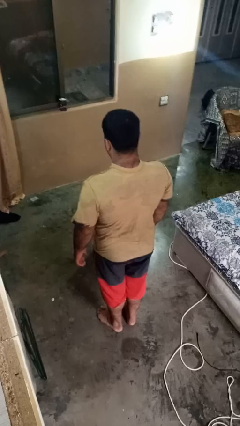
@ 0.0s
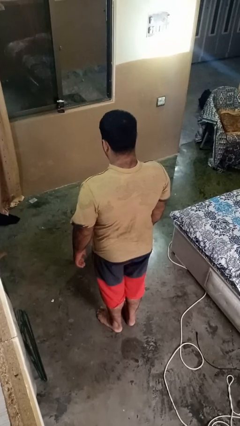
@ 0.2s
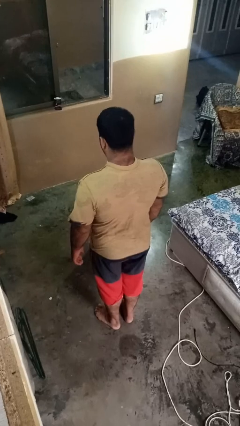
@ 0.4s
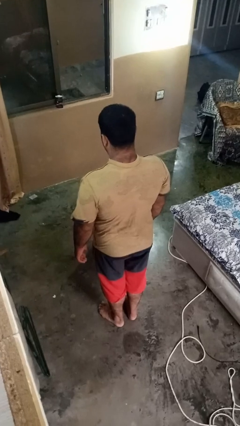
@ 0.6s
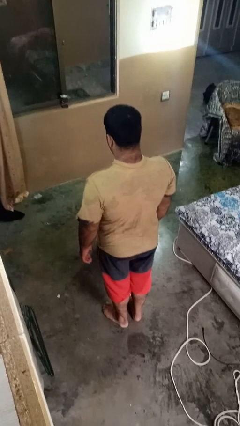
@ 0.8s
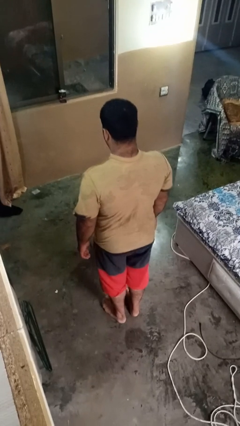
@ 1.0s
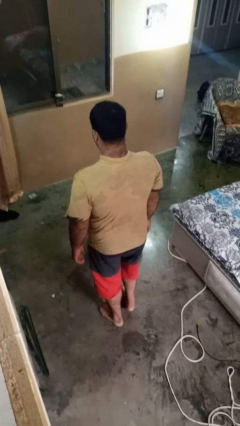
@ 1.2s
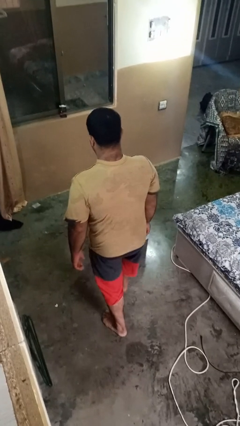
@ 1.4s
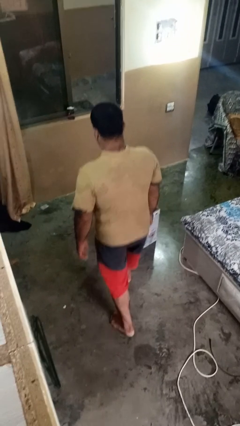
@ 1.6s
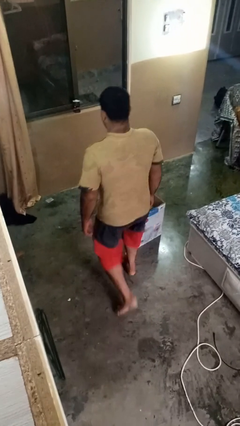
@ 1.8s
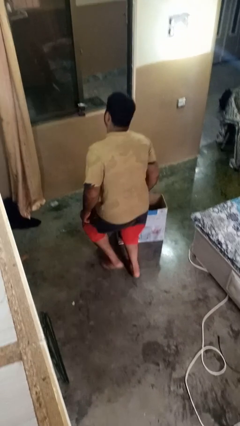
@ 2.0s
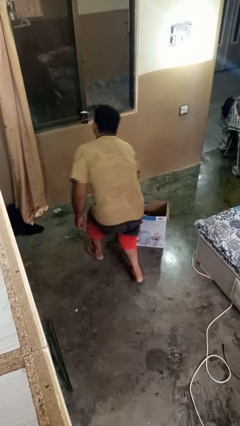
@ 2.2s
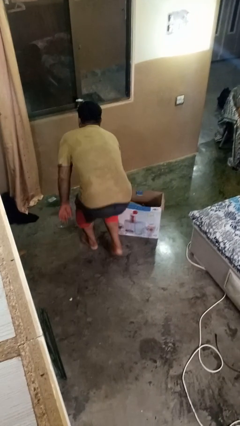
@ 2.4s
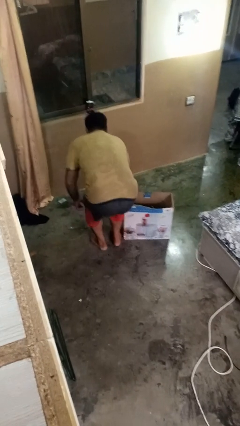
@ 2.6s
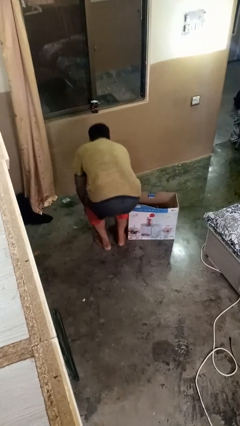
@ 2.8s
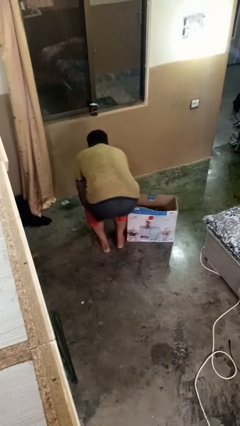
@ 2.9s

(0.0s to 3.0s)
person trips on object on floor

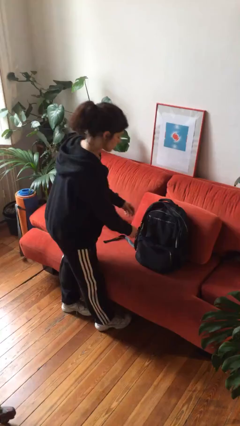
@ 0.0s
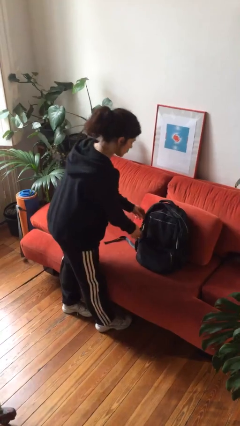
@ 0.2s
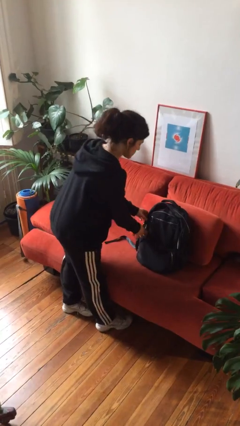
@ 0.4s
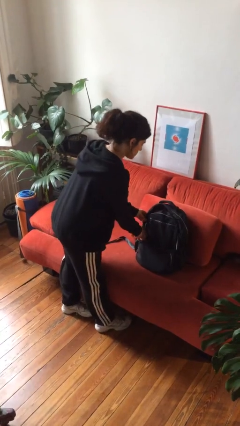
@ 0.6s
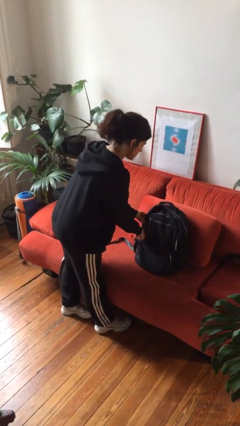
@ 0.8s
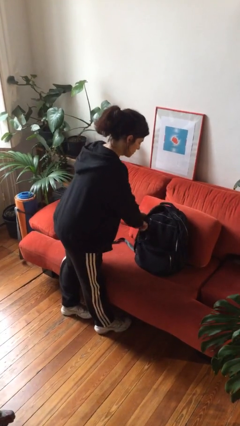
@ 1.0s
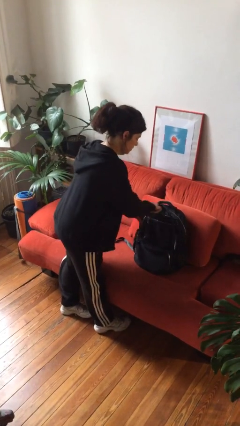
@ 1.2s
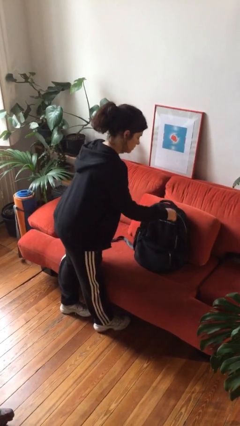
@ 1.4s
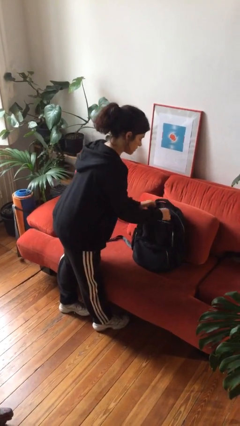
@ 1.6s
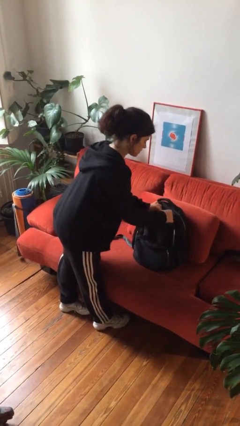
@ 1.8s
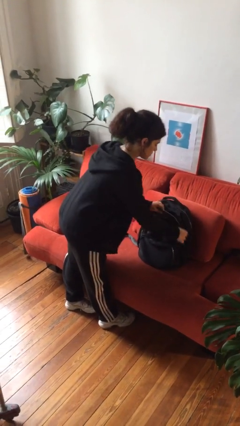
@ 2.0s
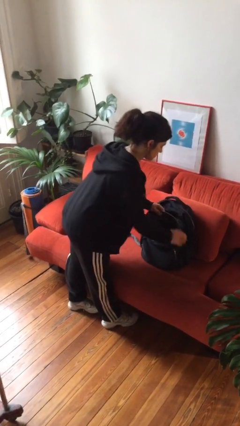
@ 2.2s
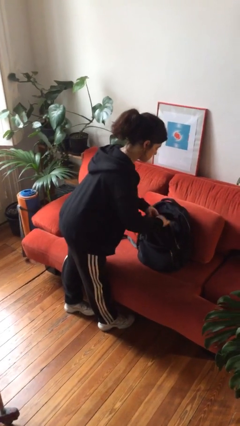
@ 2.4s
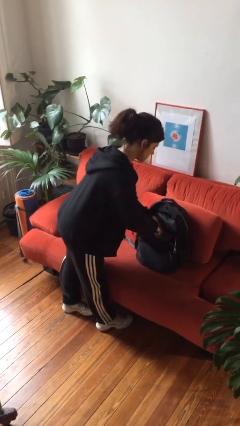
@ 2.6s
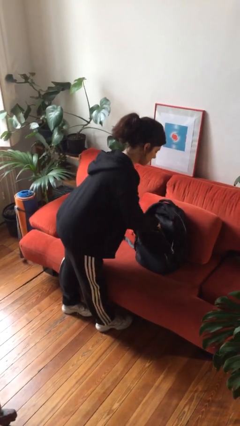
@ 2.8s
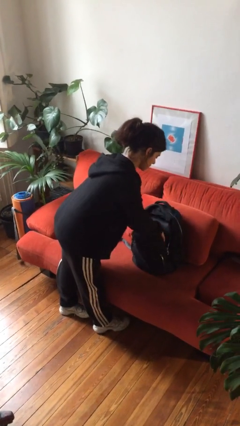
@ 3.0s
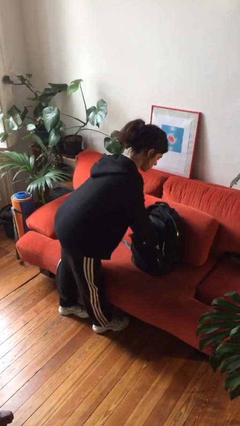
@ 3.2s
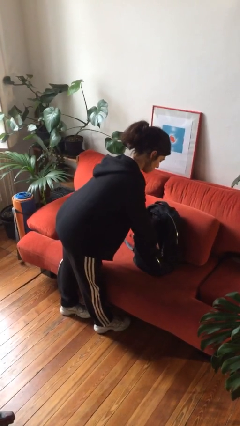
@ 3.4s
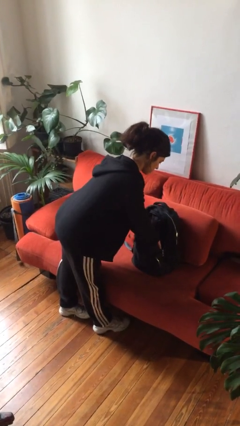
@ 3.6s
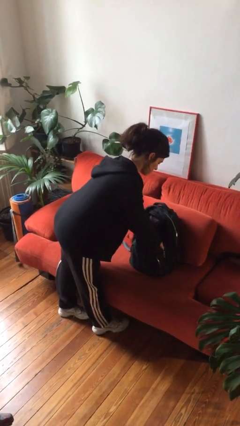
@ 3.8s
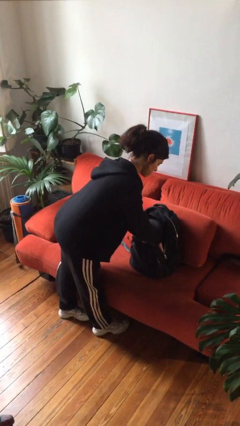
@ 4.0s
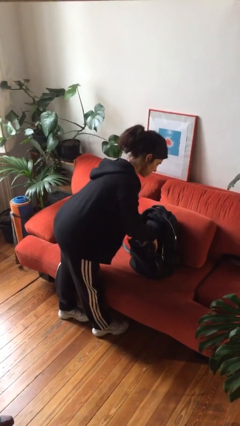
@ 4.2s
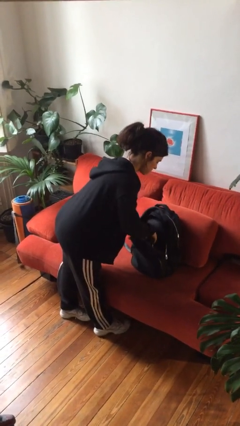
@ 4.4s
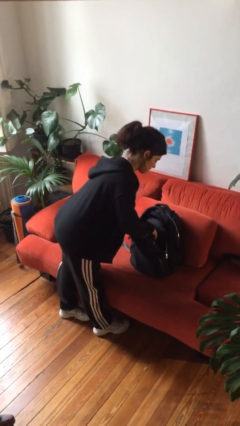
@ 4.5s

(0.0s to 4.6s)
person searches in backpack

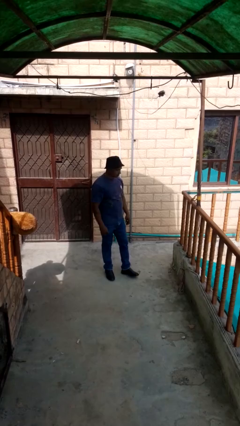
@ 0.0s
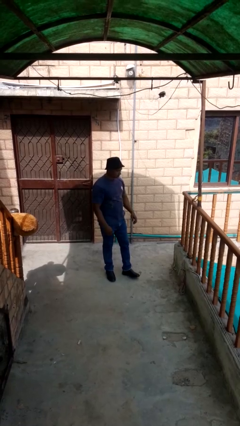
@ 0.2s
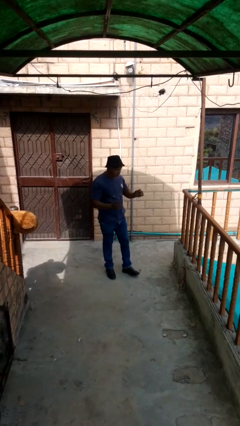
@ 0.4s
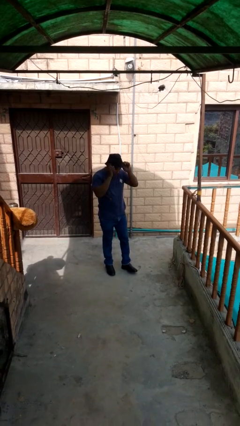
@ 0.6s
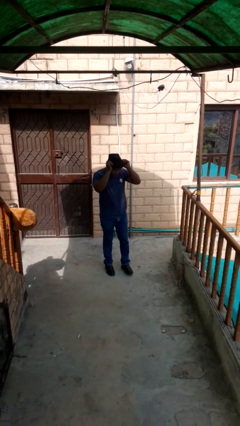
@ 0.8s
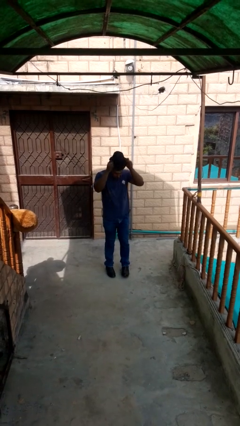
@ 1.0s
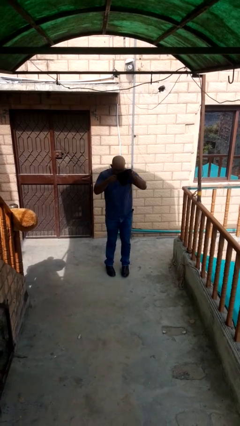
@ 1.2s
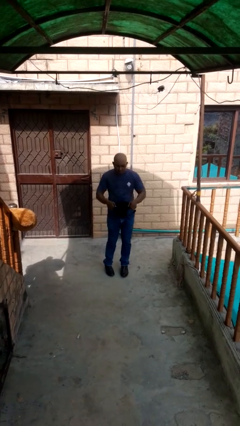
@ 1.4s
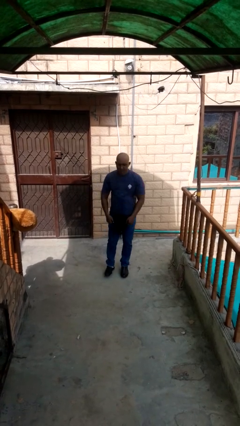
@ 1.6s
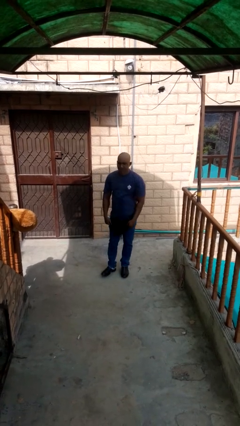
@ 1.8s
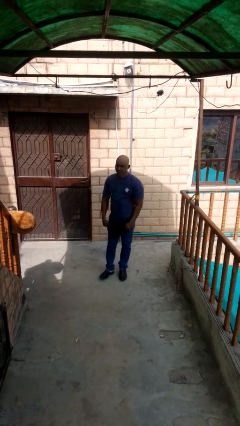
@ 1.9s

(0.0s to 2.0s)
person takes off hat

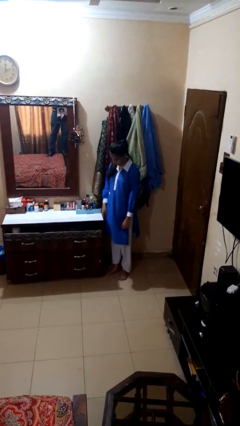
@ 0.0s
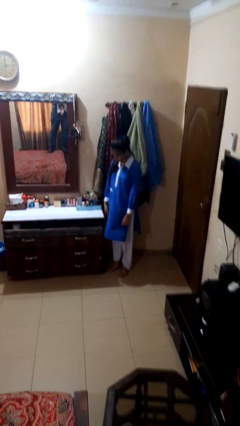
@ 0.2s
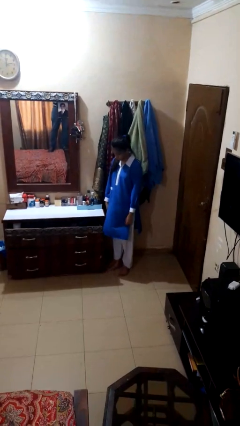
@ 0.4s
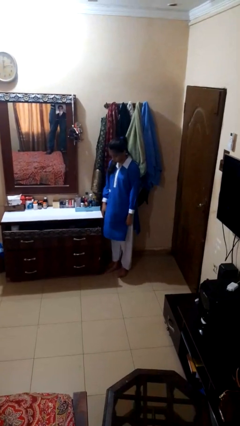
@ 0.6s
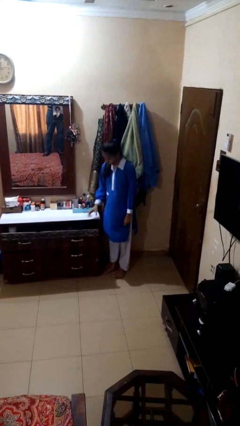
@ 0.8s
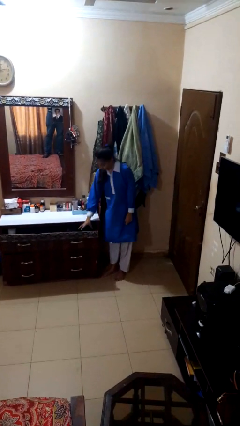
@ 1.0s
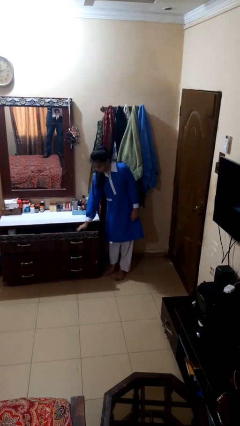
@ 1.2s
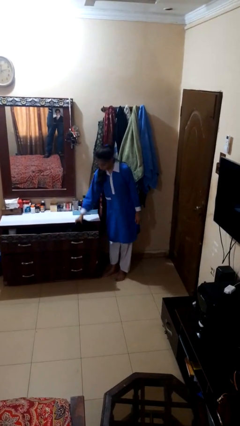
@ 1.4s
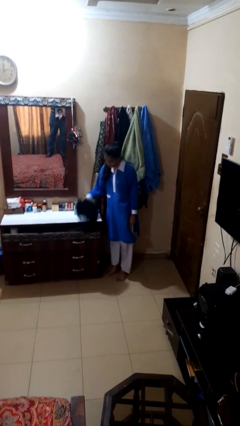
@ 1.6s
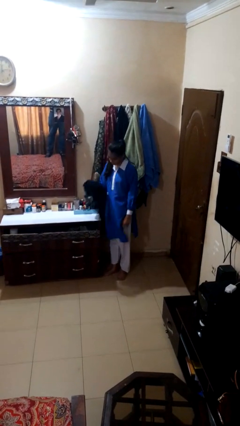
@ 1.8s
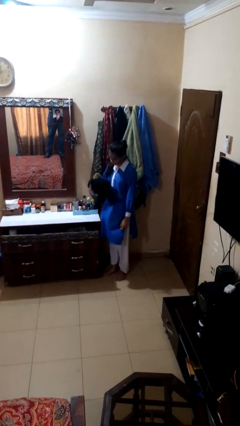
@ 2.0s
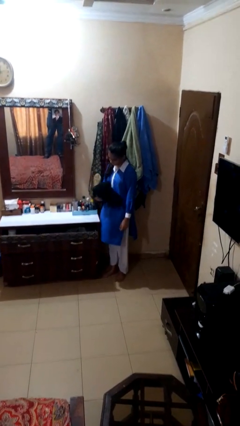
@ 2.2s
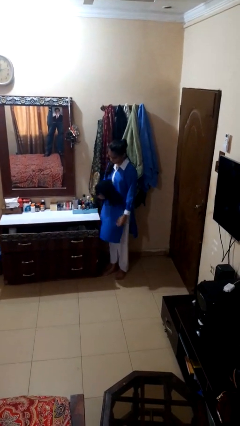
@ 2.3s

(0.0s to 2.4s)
person takes clothes from dresser

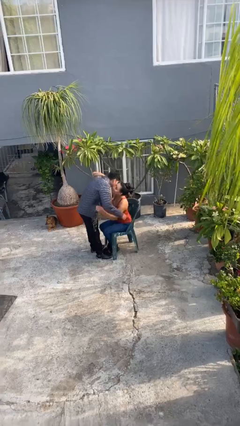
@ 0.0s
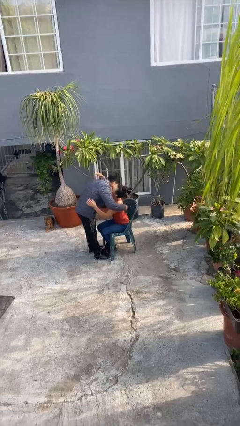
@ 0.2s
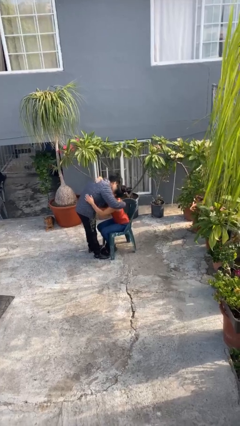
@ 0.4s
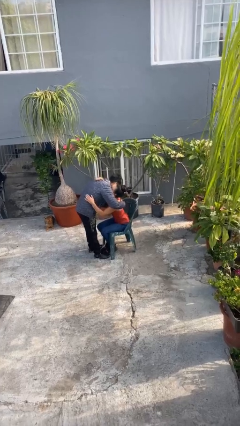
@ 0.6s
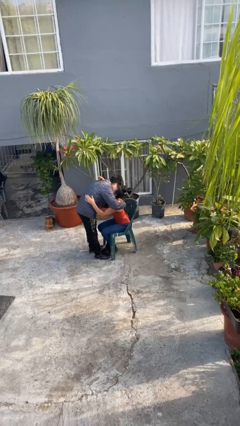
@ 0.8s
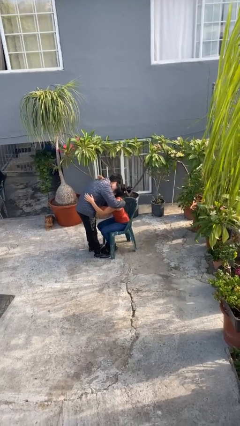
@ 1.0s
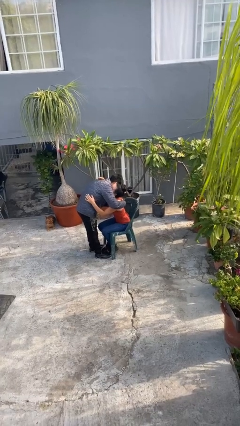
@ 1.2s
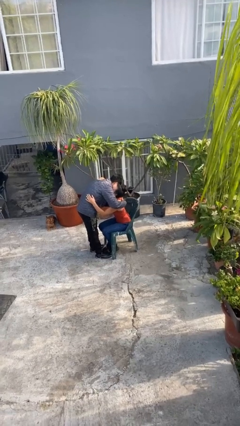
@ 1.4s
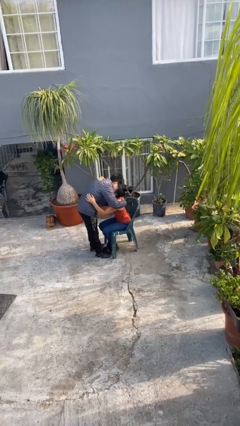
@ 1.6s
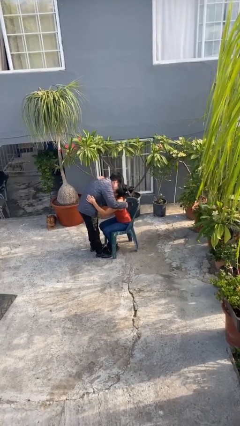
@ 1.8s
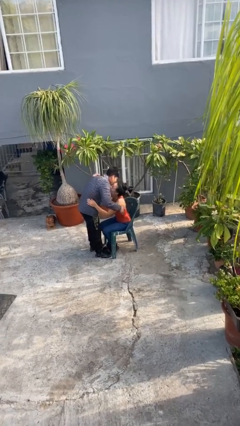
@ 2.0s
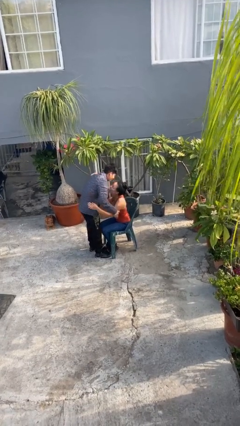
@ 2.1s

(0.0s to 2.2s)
person embraces person

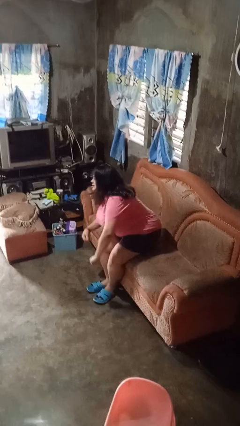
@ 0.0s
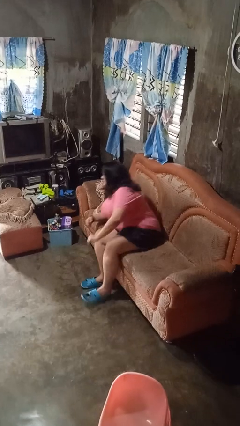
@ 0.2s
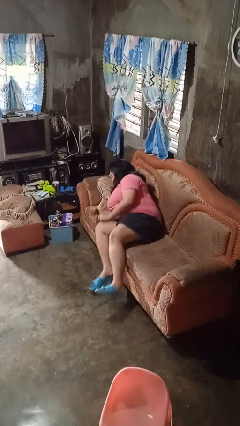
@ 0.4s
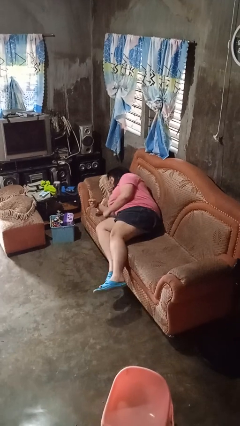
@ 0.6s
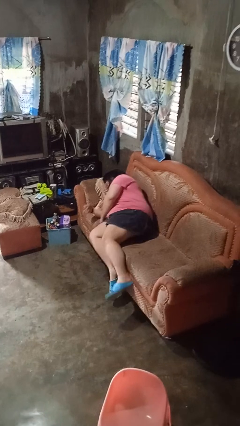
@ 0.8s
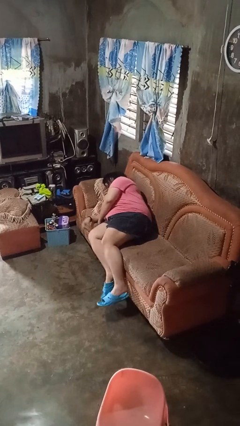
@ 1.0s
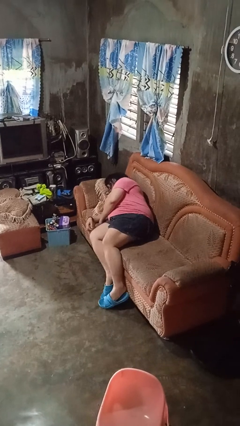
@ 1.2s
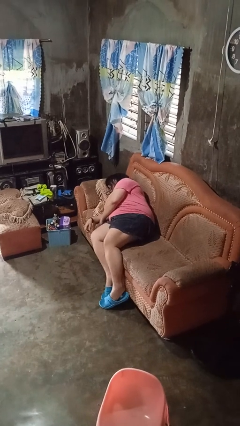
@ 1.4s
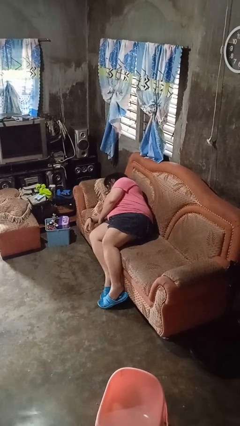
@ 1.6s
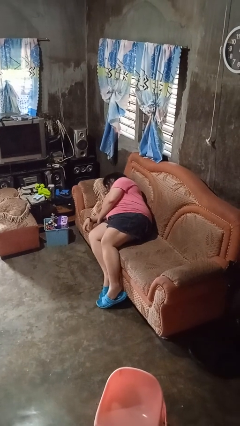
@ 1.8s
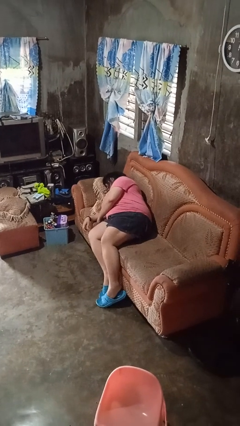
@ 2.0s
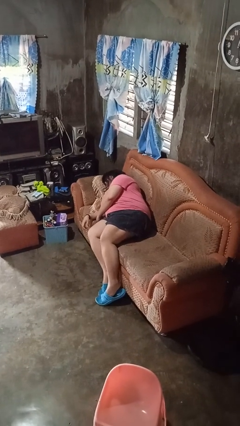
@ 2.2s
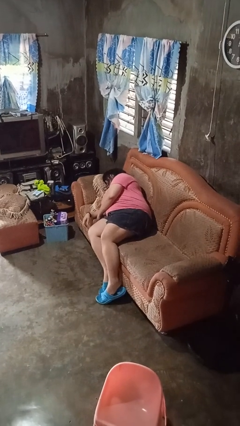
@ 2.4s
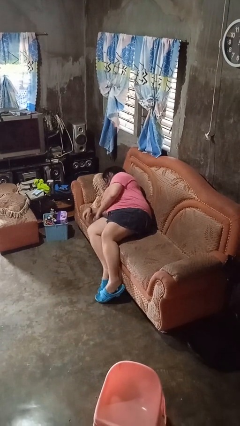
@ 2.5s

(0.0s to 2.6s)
person lies down on couch

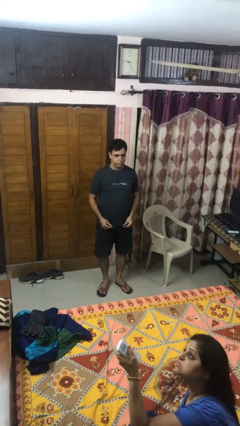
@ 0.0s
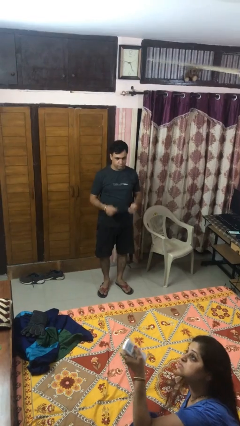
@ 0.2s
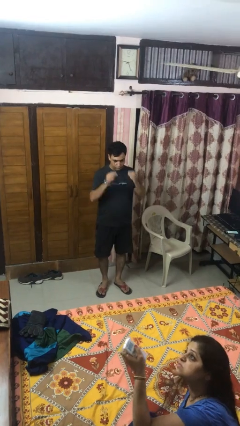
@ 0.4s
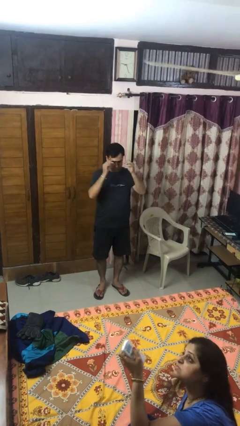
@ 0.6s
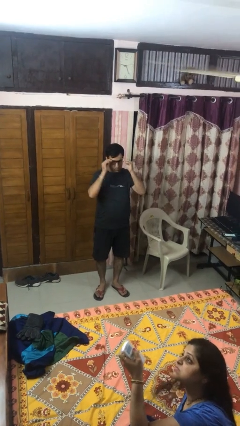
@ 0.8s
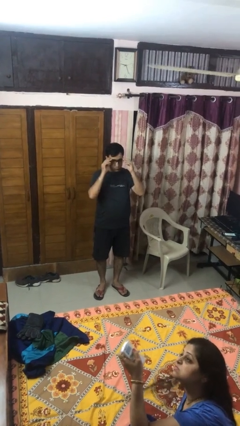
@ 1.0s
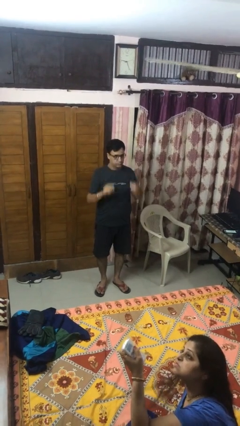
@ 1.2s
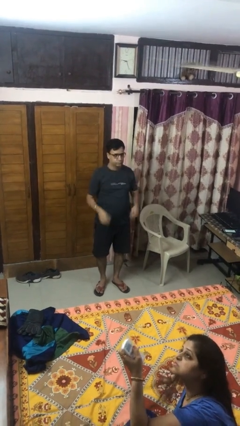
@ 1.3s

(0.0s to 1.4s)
person puts on glasses
